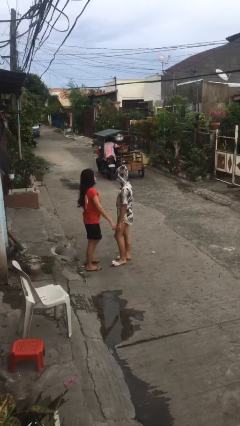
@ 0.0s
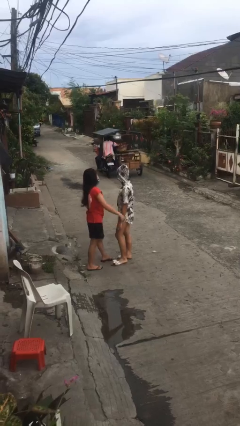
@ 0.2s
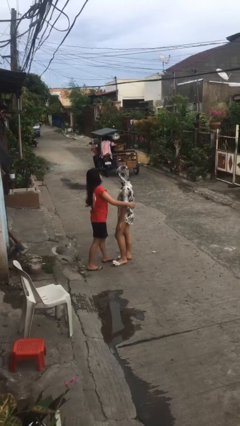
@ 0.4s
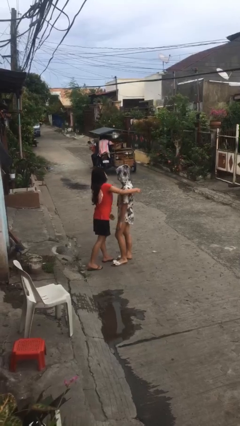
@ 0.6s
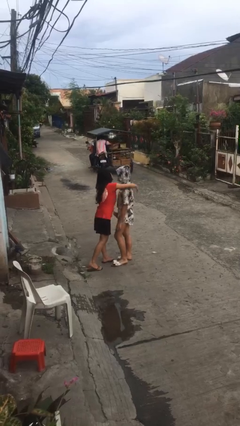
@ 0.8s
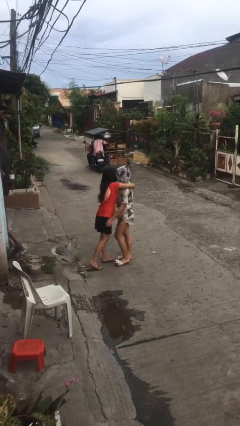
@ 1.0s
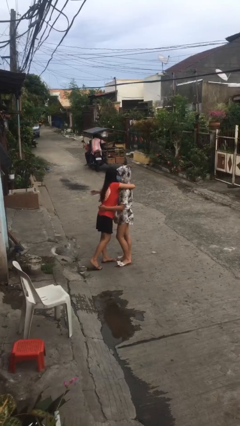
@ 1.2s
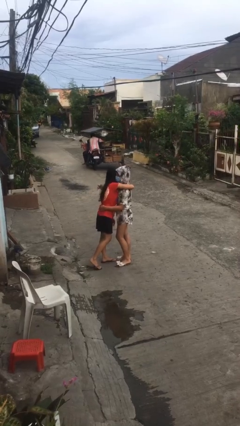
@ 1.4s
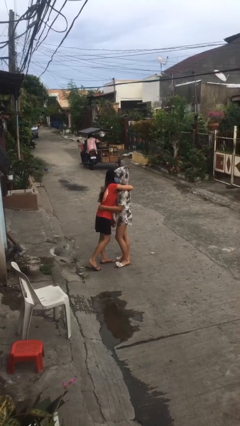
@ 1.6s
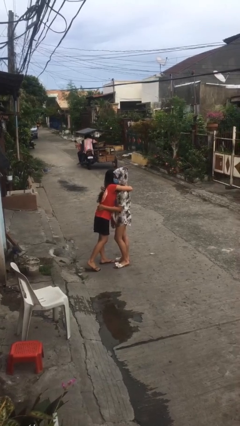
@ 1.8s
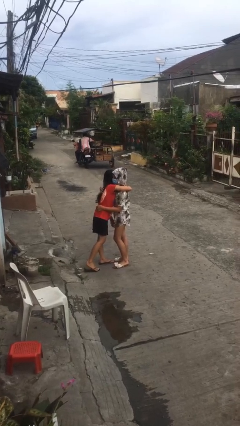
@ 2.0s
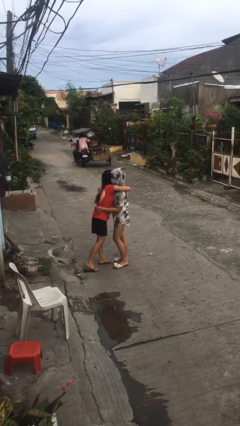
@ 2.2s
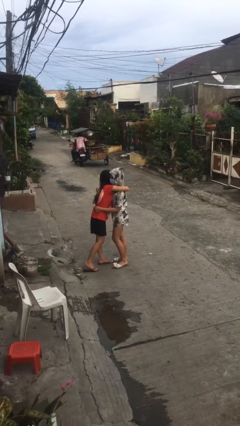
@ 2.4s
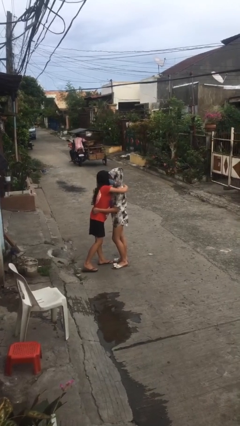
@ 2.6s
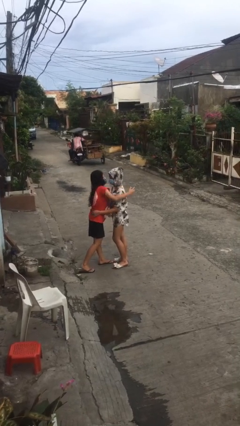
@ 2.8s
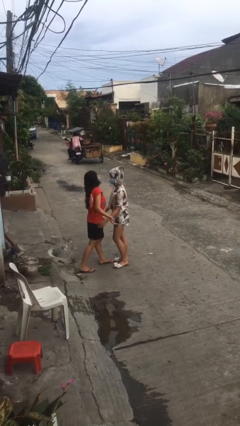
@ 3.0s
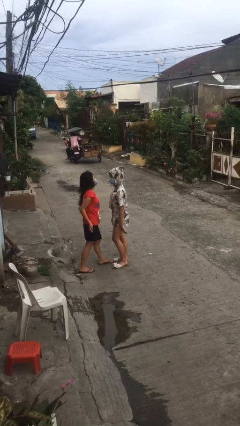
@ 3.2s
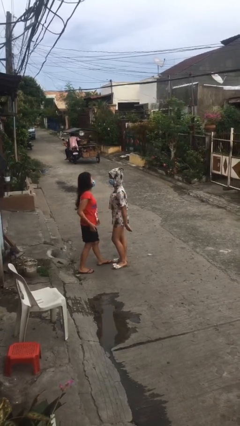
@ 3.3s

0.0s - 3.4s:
person embraces person

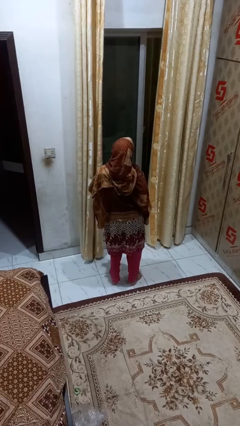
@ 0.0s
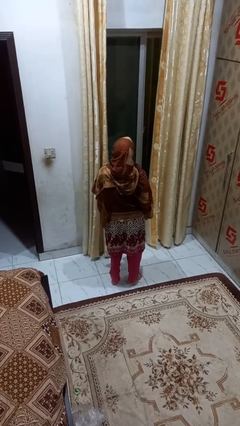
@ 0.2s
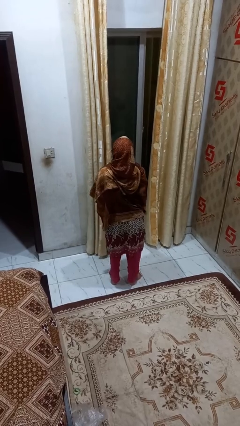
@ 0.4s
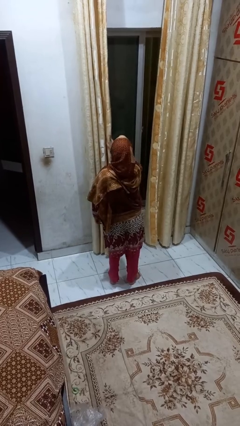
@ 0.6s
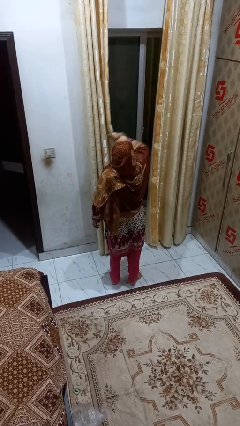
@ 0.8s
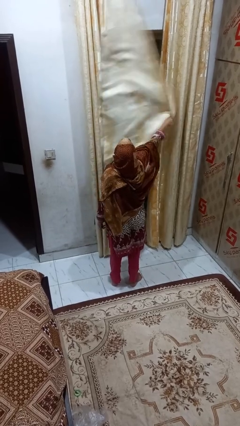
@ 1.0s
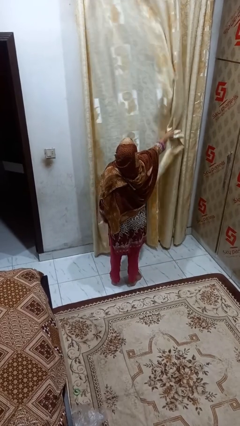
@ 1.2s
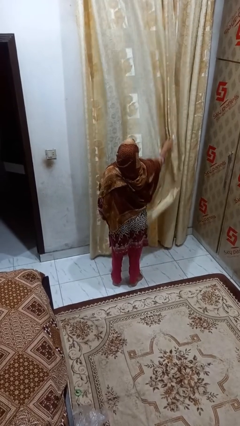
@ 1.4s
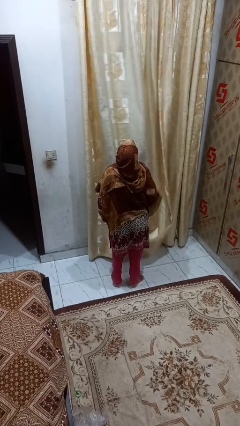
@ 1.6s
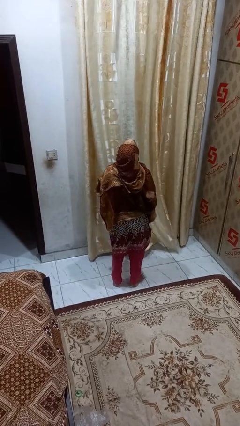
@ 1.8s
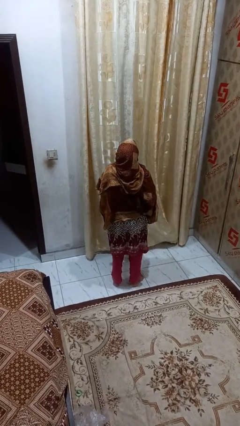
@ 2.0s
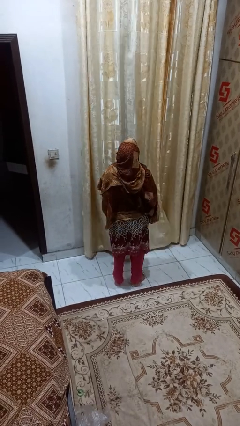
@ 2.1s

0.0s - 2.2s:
person closes curtains

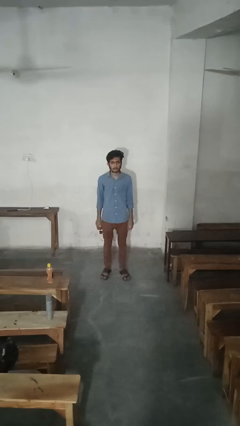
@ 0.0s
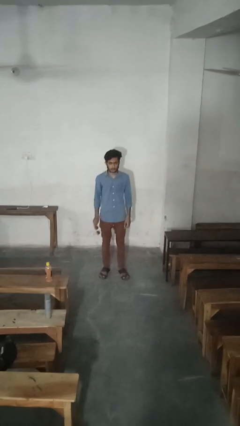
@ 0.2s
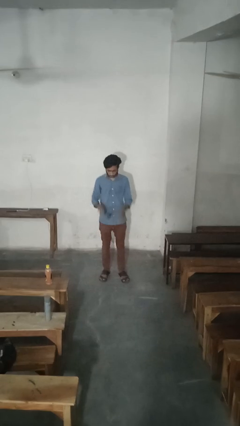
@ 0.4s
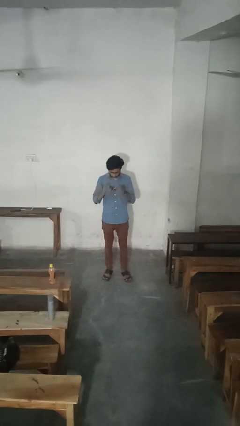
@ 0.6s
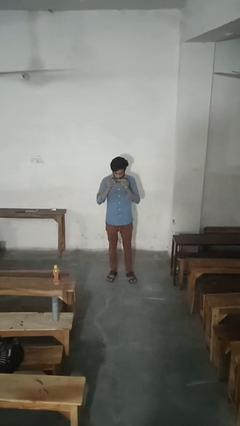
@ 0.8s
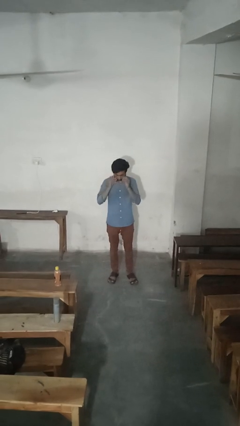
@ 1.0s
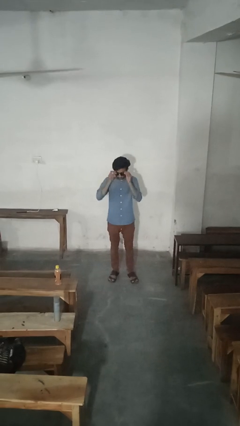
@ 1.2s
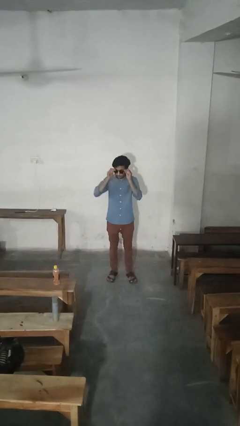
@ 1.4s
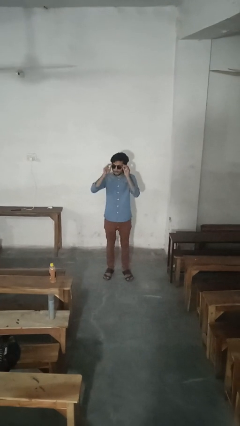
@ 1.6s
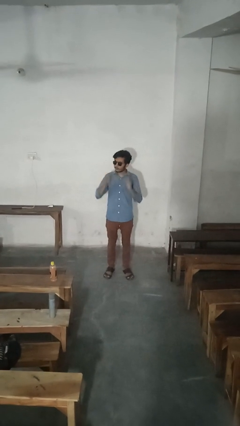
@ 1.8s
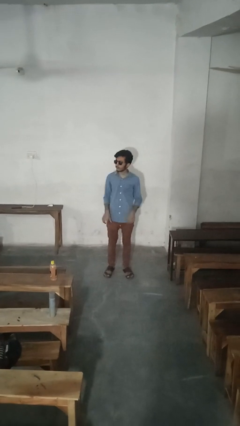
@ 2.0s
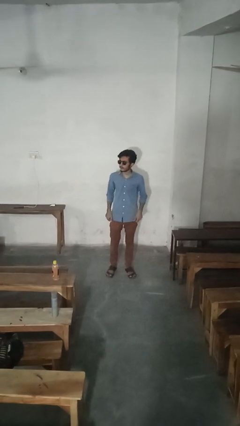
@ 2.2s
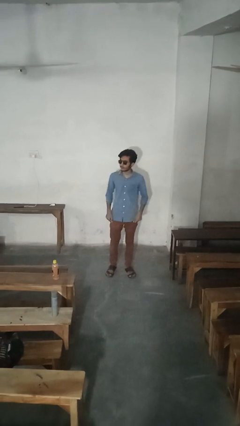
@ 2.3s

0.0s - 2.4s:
person puts on sunglasses

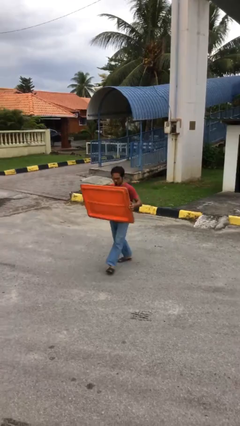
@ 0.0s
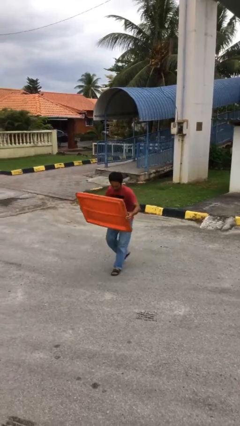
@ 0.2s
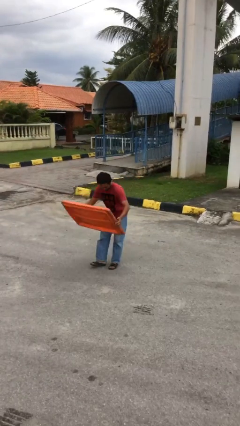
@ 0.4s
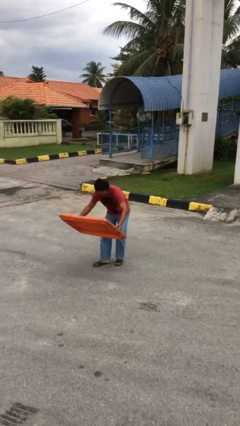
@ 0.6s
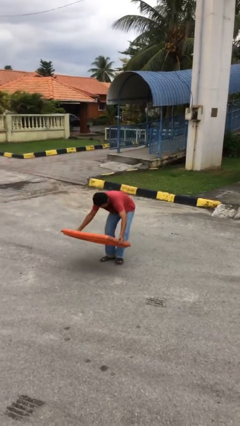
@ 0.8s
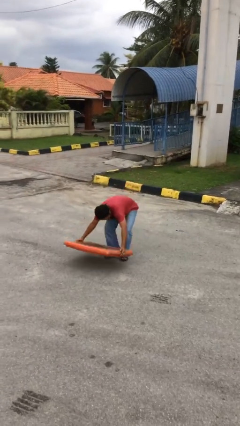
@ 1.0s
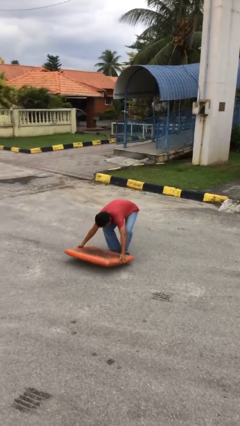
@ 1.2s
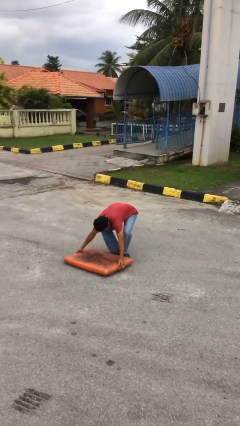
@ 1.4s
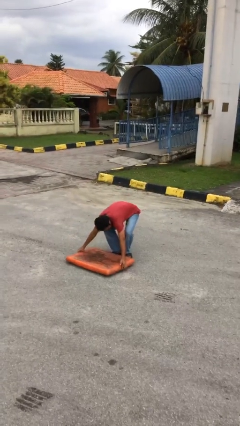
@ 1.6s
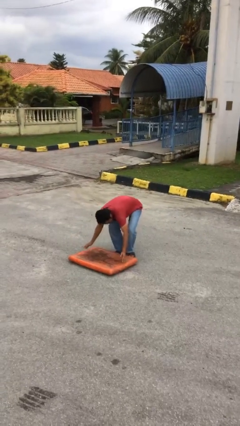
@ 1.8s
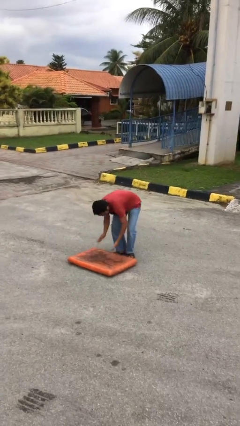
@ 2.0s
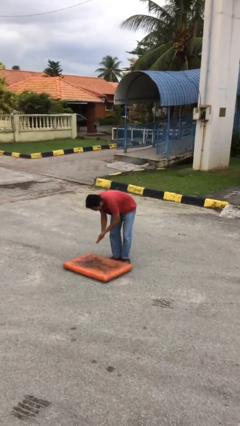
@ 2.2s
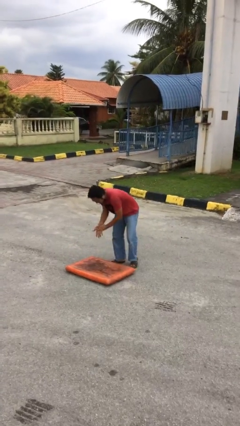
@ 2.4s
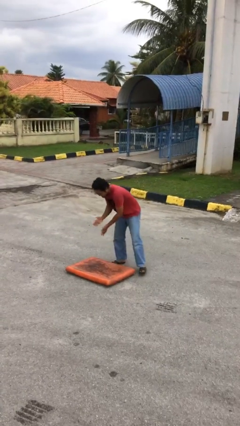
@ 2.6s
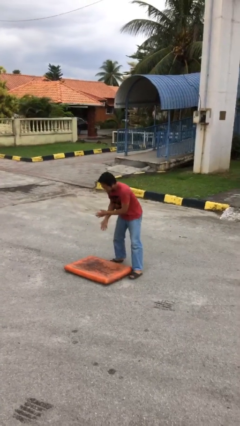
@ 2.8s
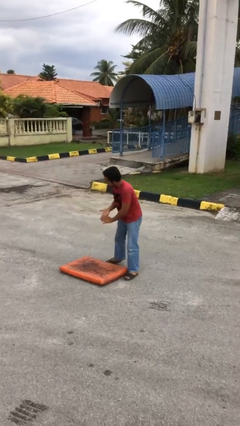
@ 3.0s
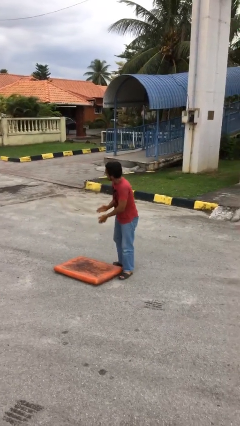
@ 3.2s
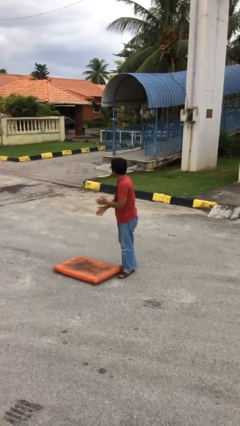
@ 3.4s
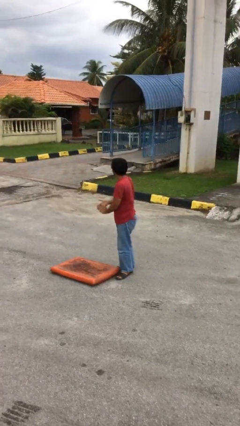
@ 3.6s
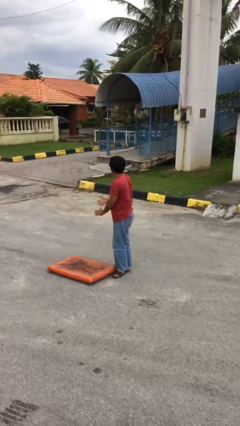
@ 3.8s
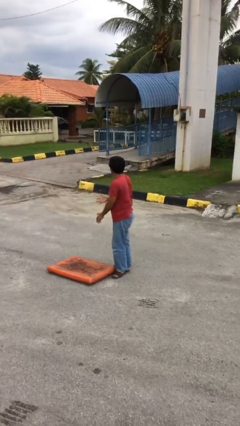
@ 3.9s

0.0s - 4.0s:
person puts down object on floor

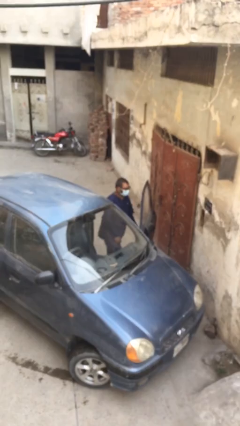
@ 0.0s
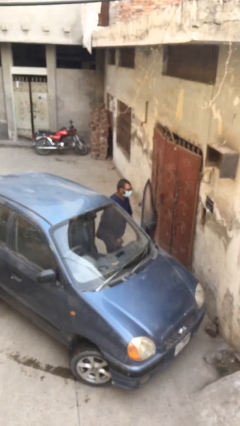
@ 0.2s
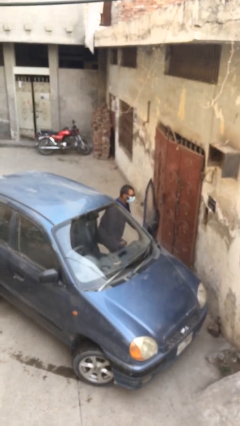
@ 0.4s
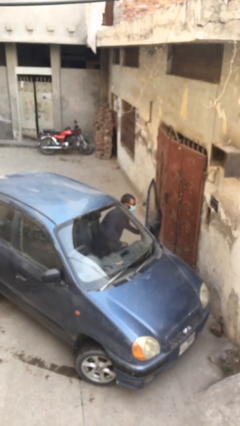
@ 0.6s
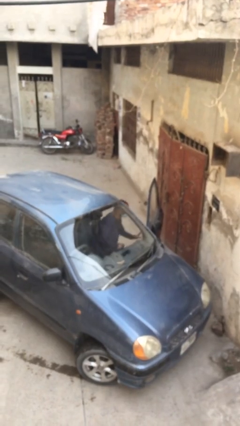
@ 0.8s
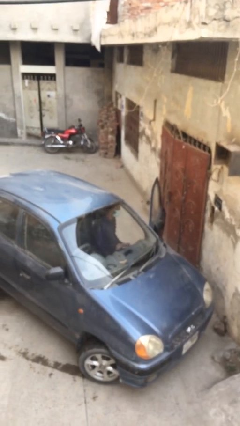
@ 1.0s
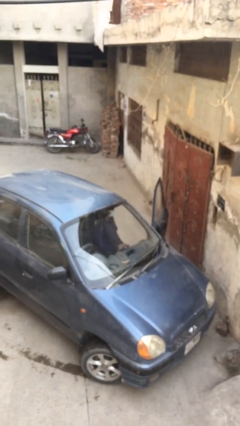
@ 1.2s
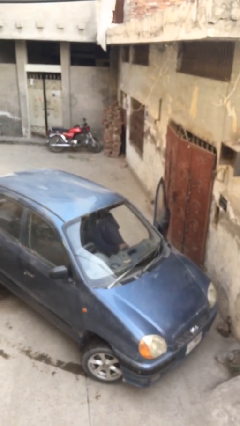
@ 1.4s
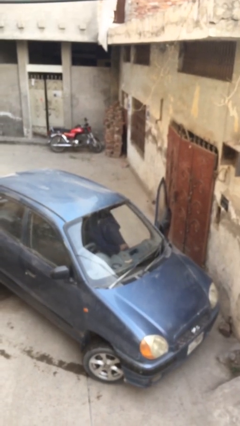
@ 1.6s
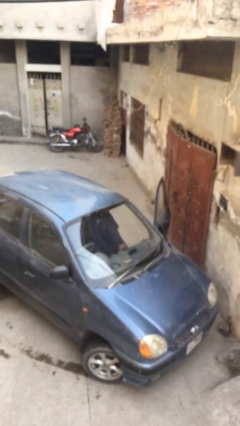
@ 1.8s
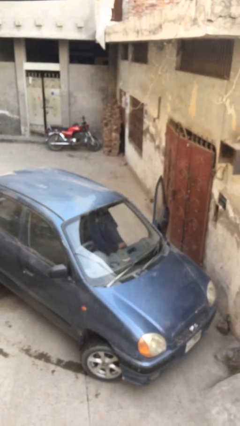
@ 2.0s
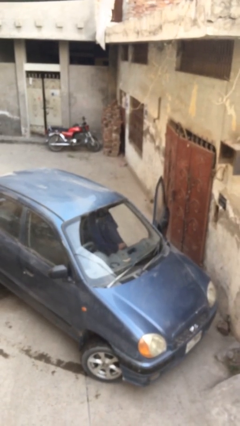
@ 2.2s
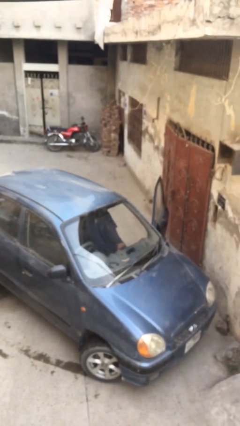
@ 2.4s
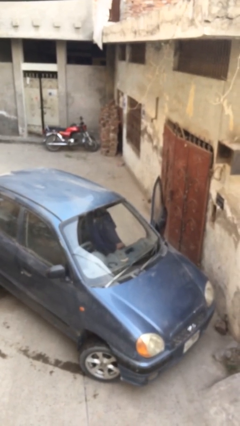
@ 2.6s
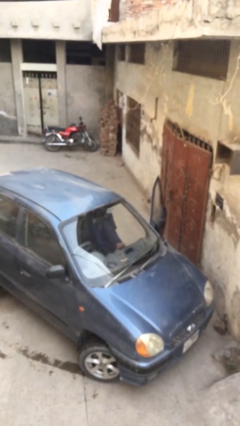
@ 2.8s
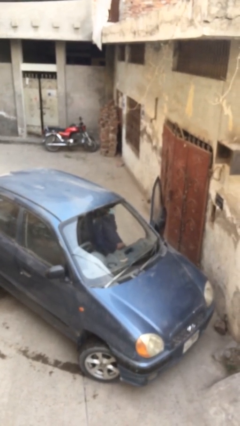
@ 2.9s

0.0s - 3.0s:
person enters car

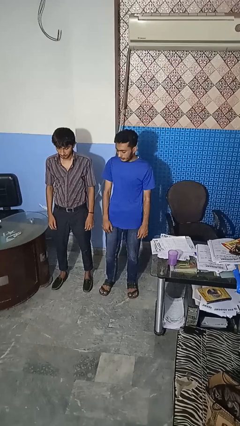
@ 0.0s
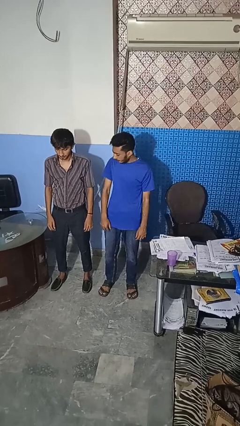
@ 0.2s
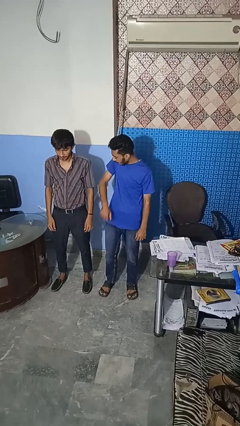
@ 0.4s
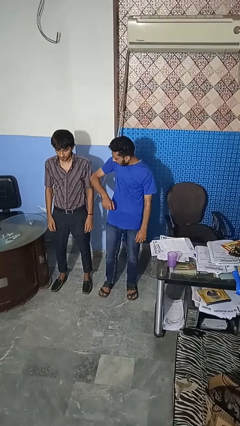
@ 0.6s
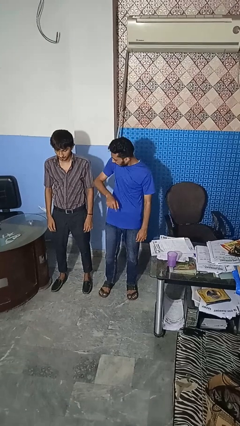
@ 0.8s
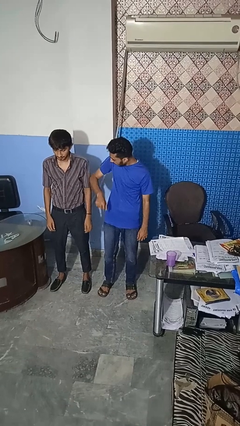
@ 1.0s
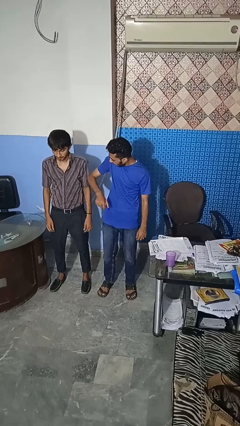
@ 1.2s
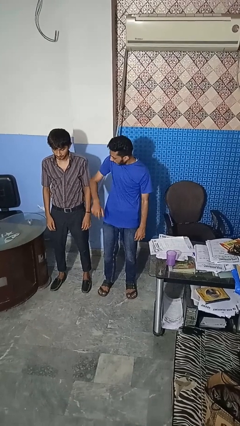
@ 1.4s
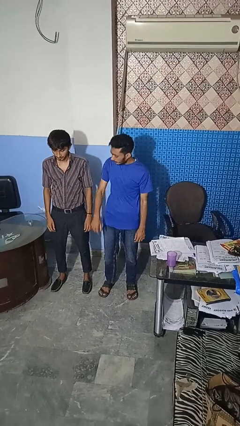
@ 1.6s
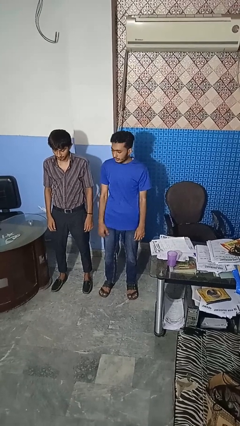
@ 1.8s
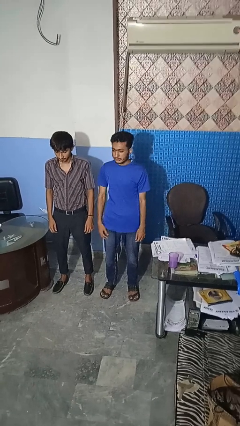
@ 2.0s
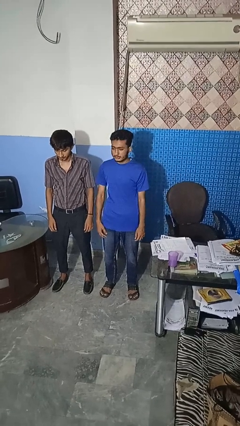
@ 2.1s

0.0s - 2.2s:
person nudges person with elbow

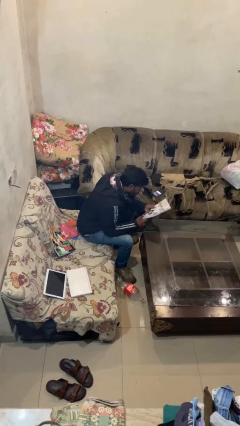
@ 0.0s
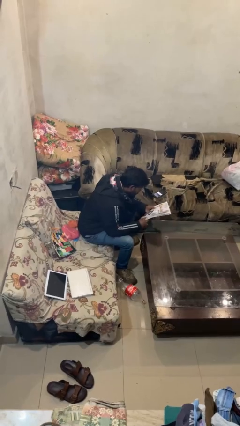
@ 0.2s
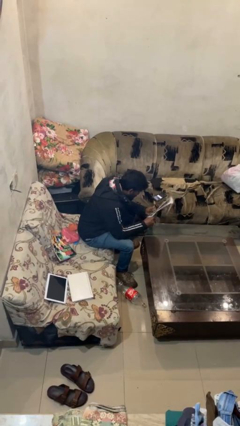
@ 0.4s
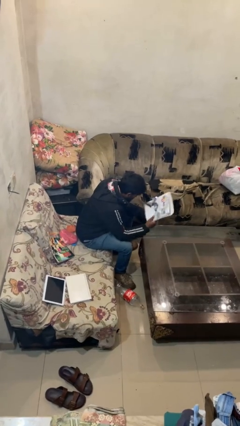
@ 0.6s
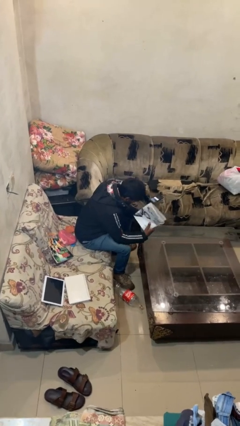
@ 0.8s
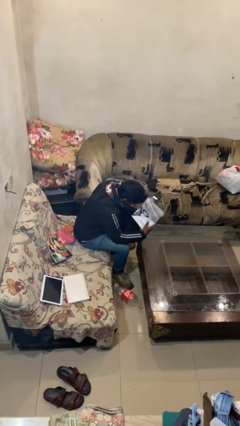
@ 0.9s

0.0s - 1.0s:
person reads document
